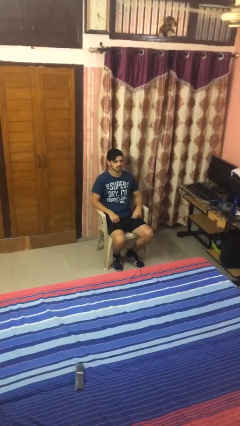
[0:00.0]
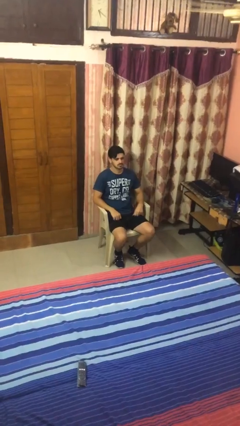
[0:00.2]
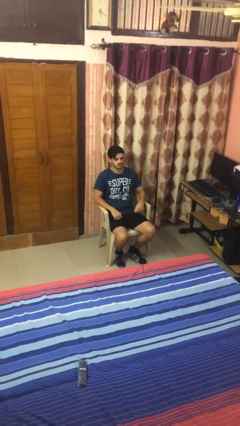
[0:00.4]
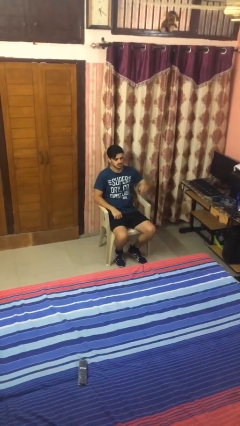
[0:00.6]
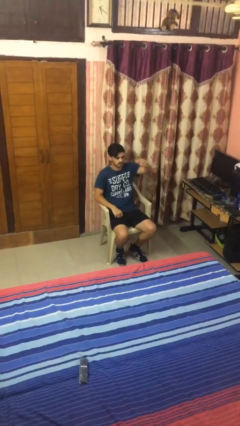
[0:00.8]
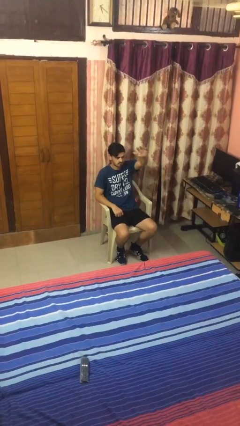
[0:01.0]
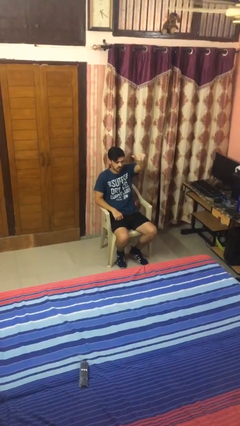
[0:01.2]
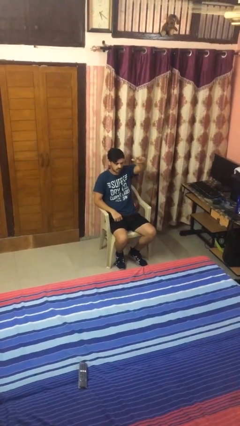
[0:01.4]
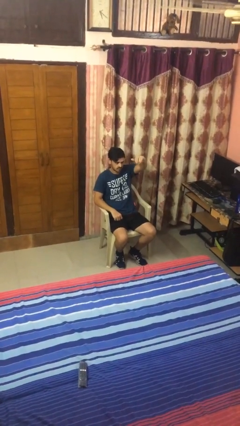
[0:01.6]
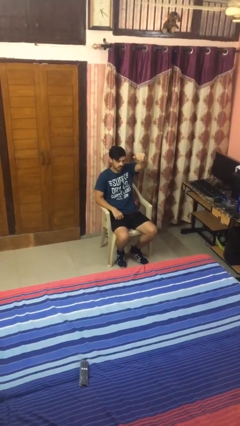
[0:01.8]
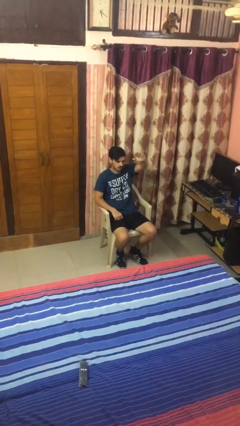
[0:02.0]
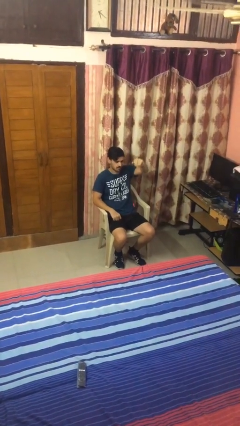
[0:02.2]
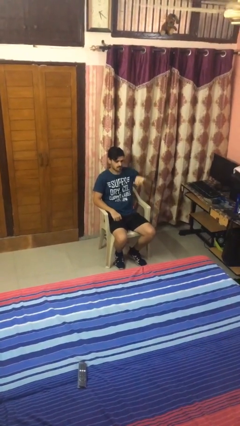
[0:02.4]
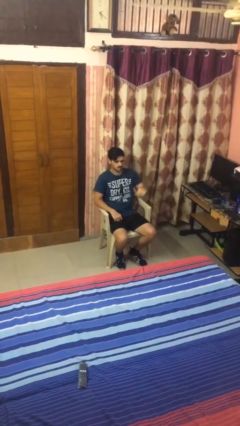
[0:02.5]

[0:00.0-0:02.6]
person gestures come here

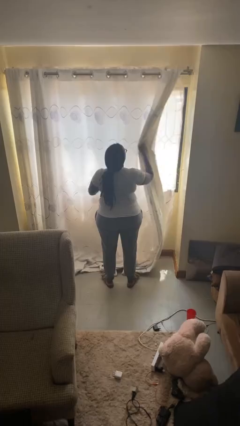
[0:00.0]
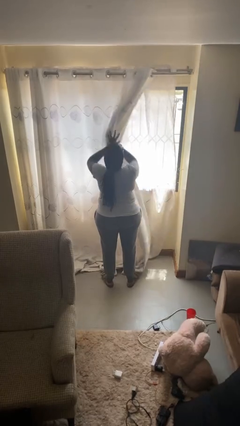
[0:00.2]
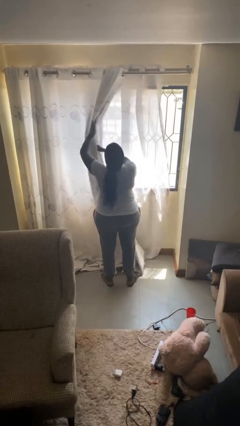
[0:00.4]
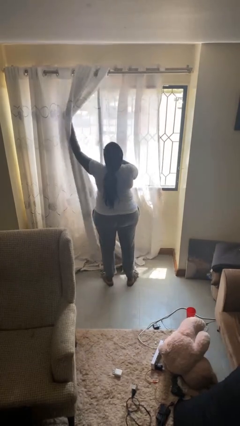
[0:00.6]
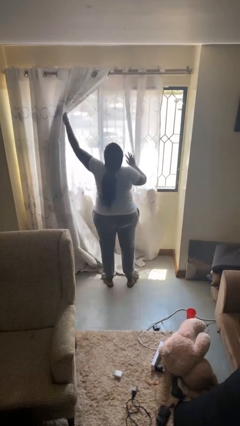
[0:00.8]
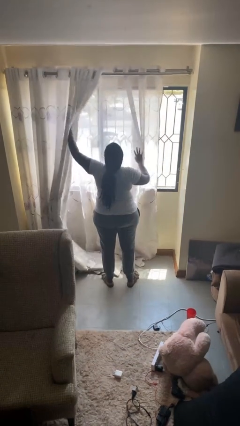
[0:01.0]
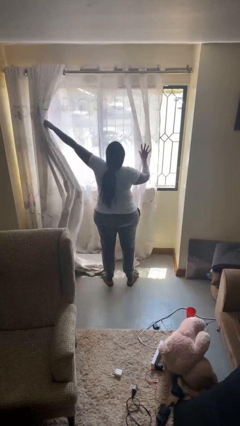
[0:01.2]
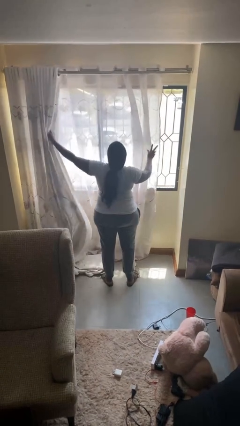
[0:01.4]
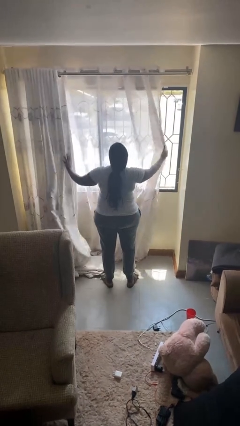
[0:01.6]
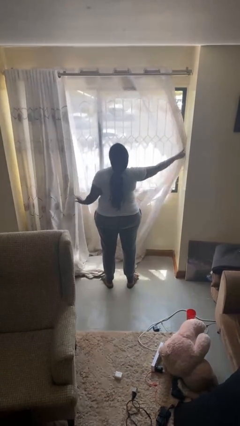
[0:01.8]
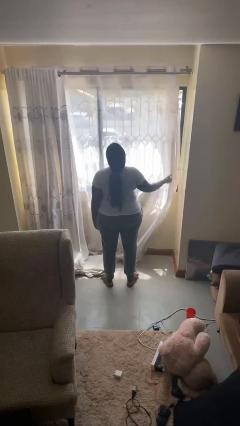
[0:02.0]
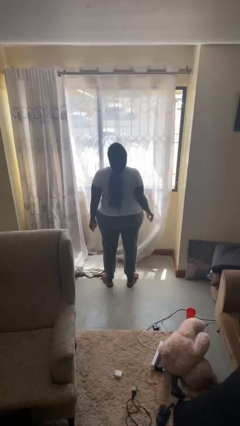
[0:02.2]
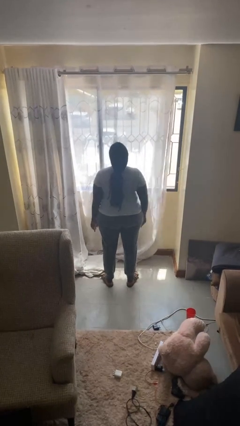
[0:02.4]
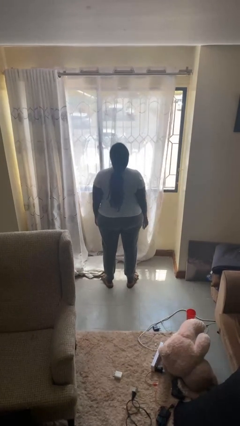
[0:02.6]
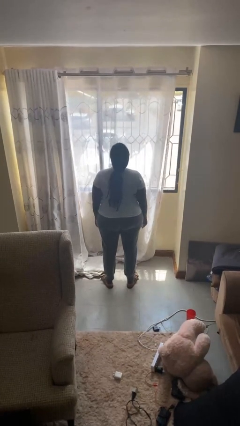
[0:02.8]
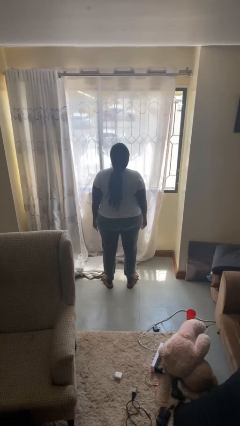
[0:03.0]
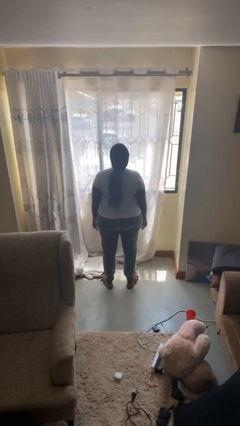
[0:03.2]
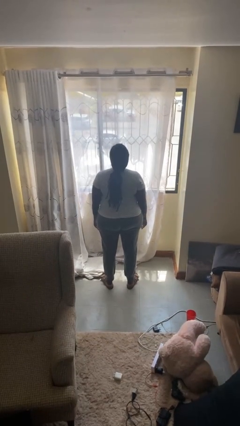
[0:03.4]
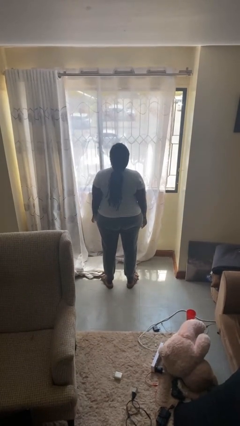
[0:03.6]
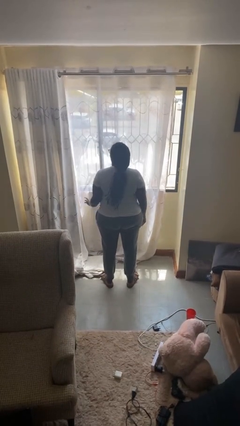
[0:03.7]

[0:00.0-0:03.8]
person opens curtains

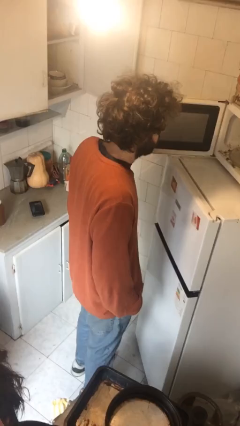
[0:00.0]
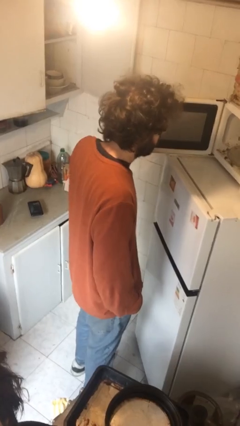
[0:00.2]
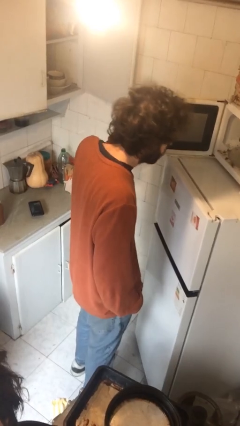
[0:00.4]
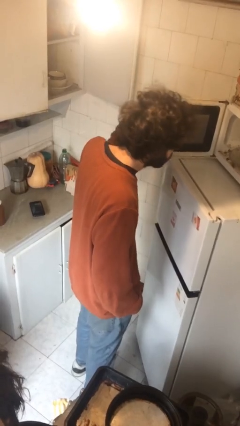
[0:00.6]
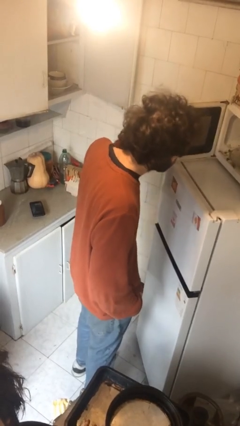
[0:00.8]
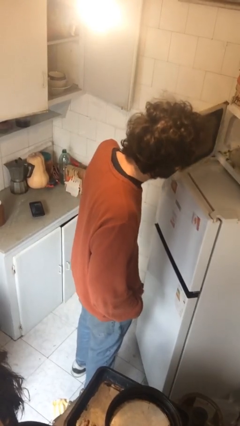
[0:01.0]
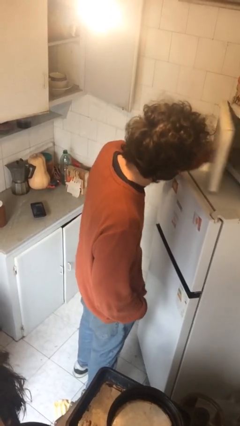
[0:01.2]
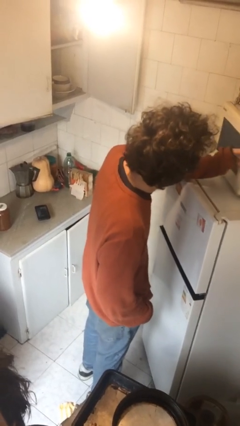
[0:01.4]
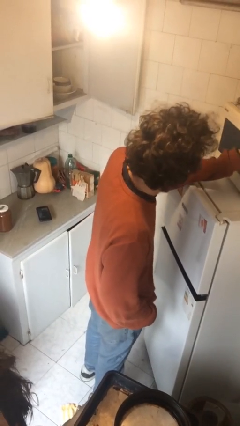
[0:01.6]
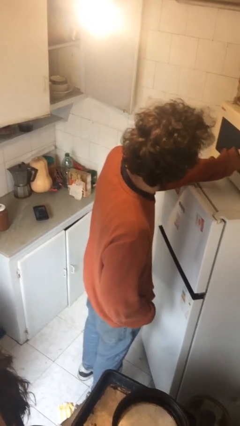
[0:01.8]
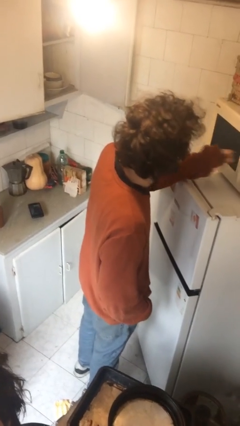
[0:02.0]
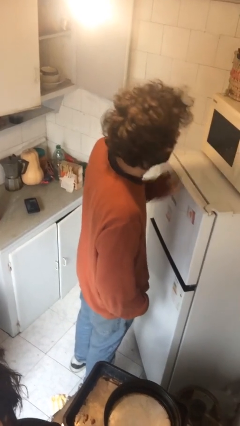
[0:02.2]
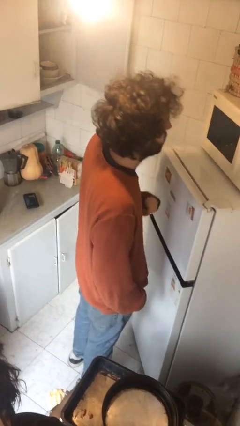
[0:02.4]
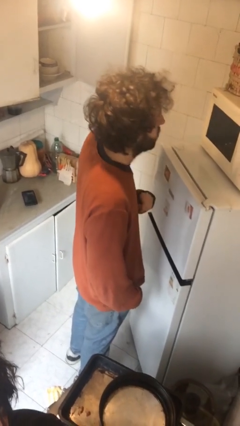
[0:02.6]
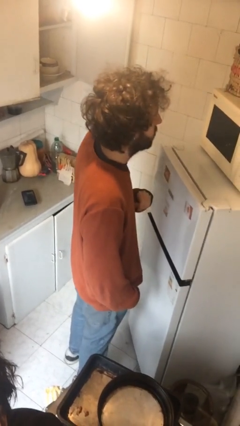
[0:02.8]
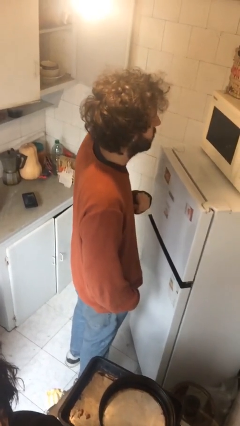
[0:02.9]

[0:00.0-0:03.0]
person closes microwave

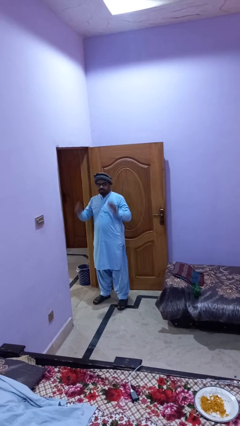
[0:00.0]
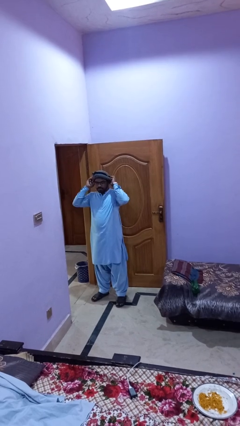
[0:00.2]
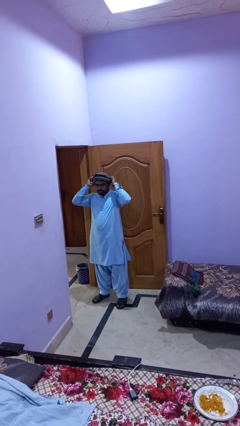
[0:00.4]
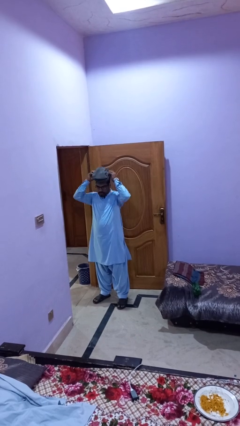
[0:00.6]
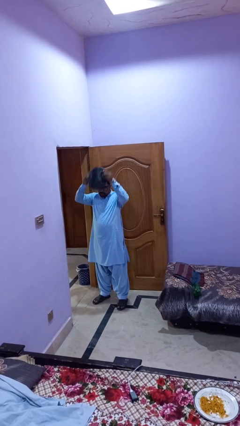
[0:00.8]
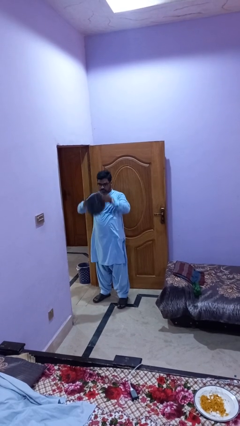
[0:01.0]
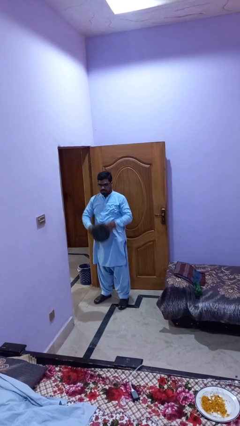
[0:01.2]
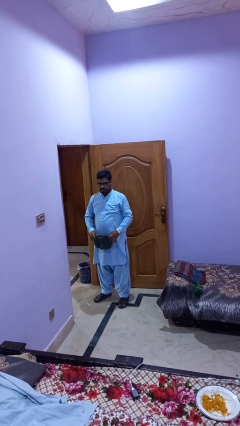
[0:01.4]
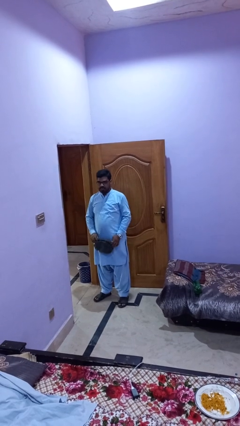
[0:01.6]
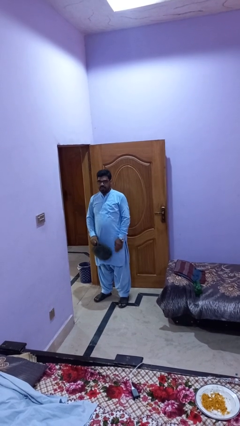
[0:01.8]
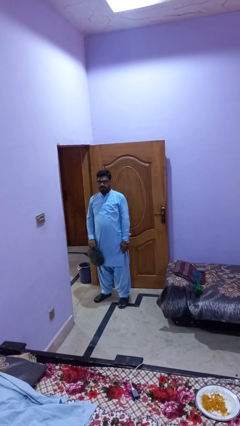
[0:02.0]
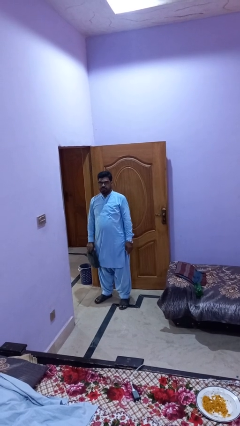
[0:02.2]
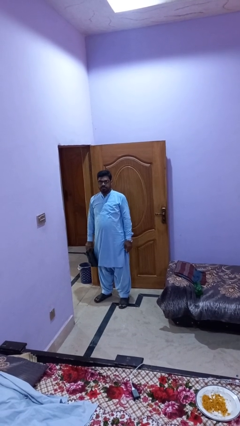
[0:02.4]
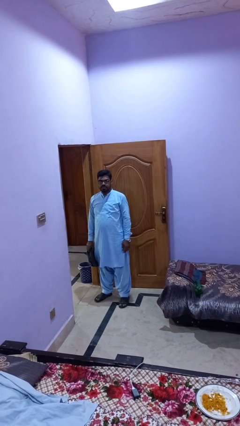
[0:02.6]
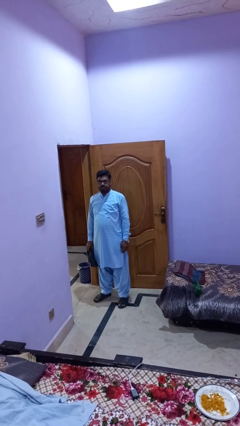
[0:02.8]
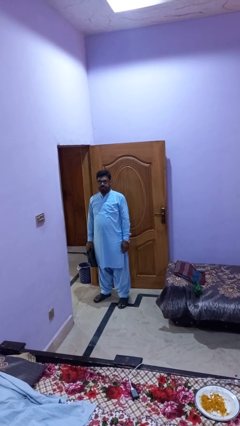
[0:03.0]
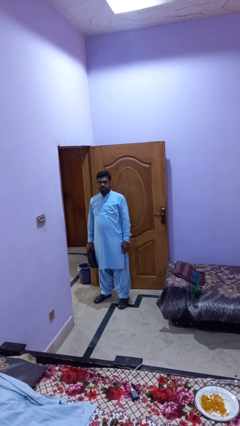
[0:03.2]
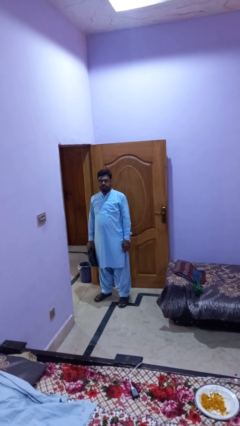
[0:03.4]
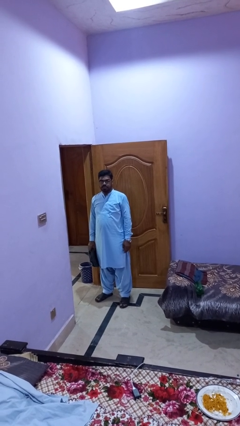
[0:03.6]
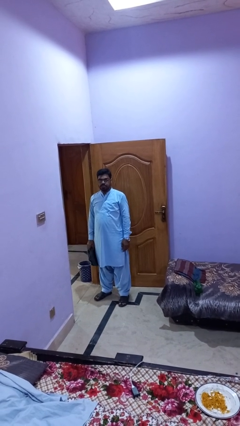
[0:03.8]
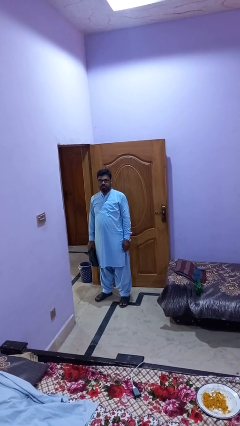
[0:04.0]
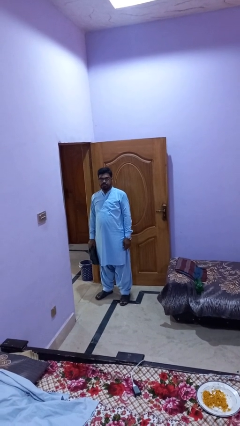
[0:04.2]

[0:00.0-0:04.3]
person takes off hat

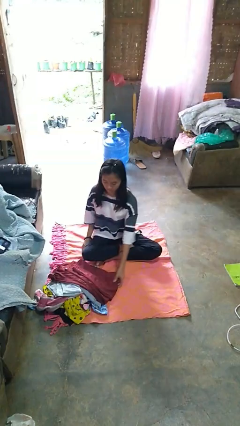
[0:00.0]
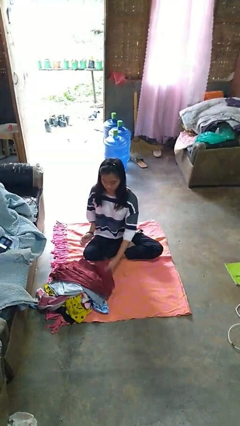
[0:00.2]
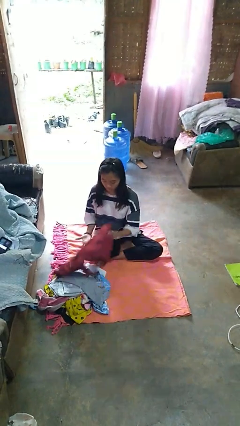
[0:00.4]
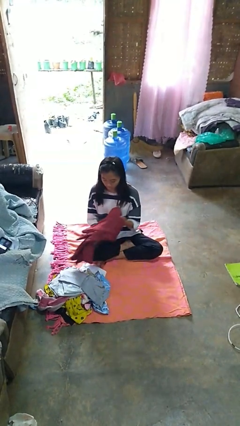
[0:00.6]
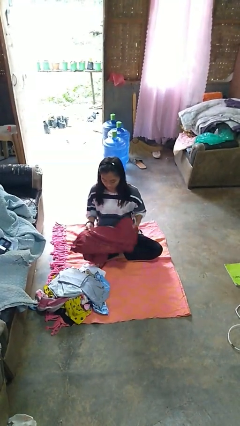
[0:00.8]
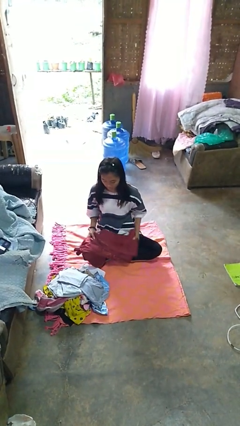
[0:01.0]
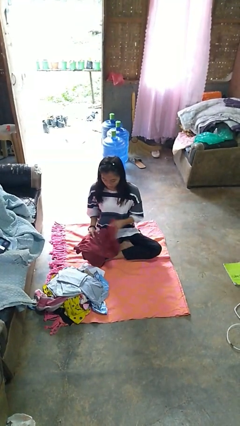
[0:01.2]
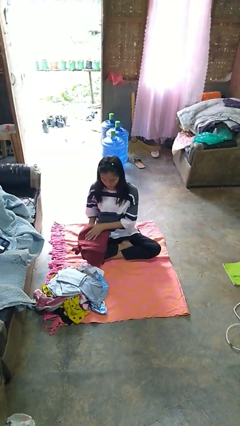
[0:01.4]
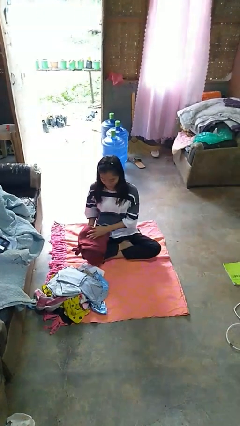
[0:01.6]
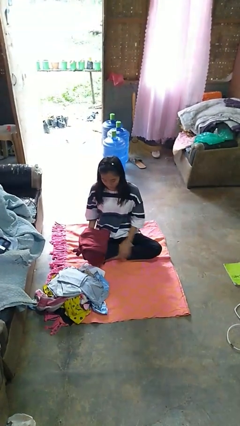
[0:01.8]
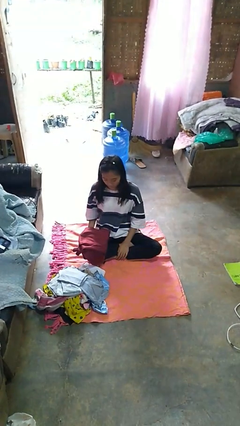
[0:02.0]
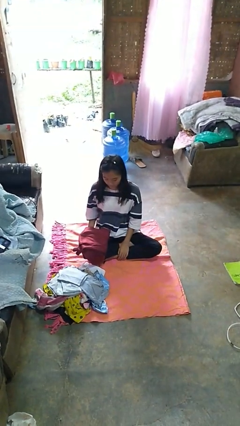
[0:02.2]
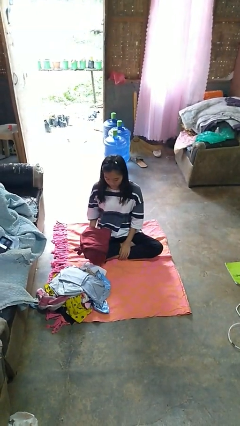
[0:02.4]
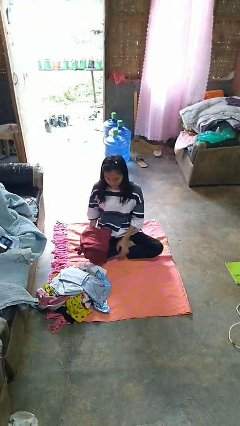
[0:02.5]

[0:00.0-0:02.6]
person folds pants

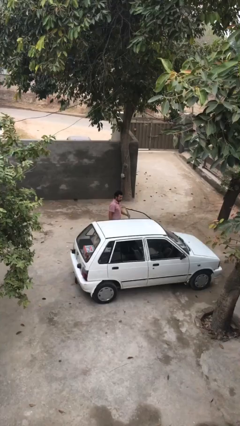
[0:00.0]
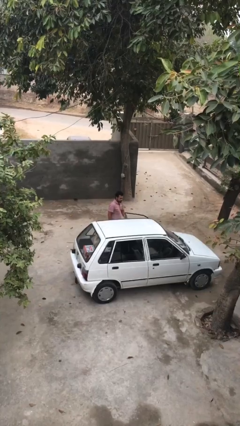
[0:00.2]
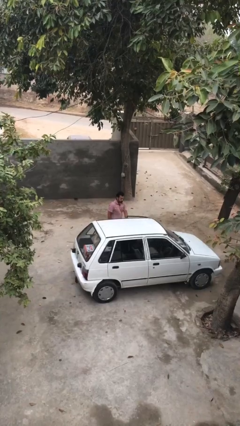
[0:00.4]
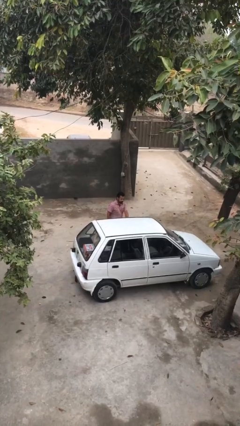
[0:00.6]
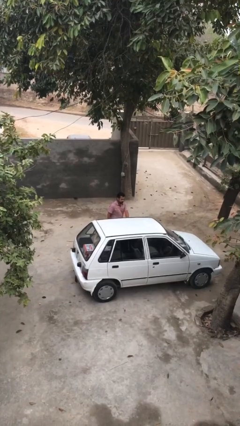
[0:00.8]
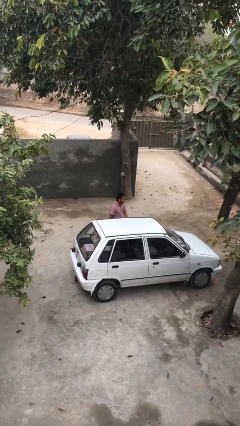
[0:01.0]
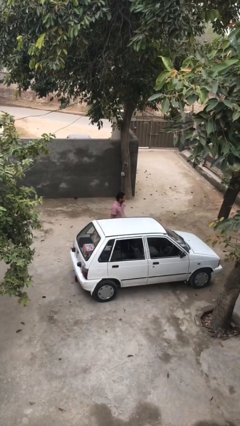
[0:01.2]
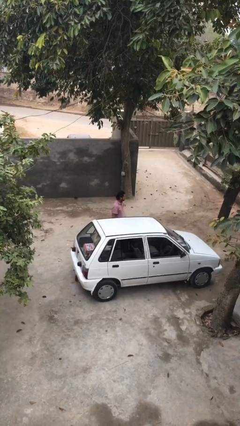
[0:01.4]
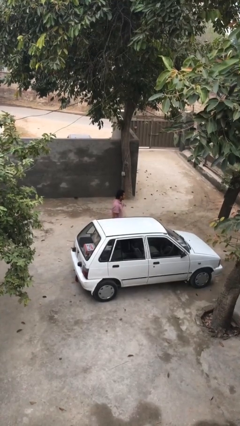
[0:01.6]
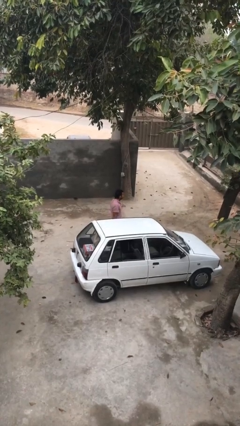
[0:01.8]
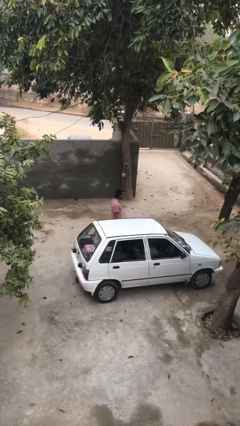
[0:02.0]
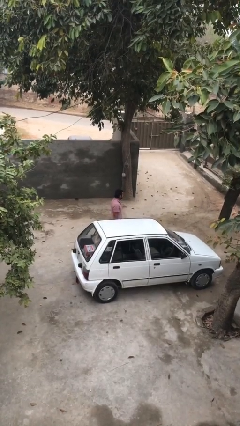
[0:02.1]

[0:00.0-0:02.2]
person closes car door
